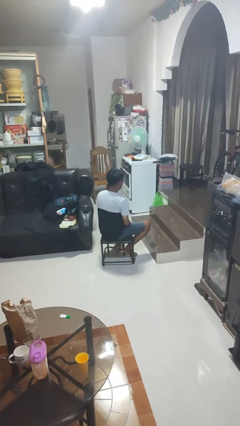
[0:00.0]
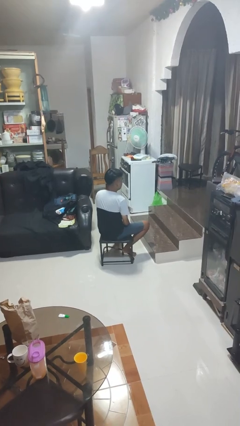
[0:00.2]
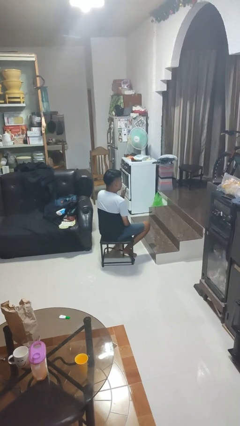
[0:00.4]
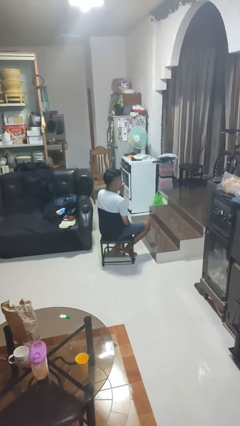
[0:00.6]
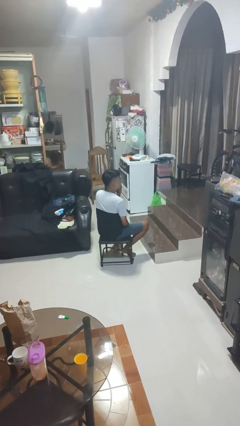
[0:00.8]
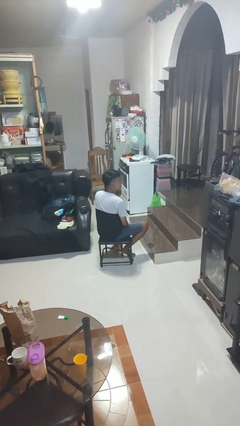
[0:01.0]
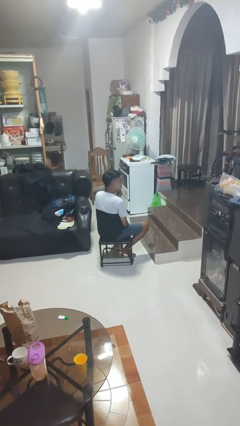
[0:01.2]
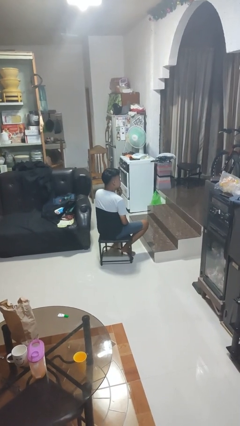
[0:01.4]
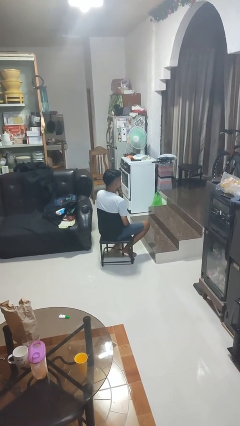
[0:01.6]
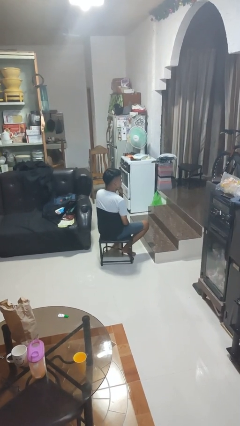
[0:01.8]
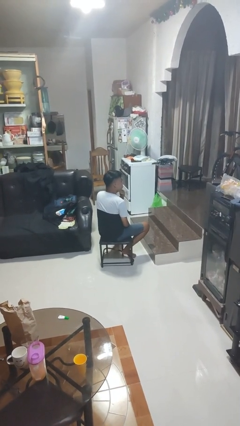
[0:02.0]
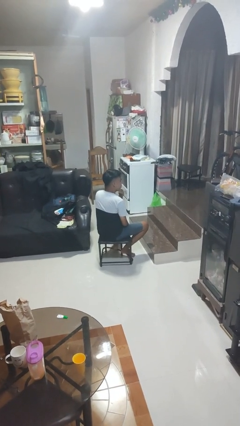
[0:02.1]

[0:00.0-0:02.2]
person strokes chin

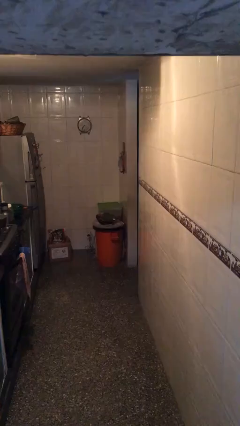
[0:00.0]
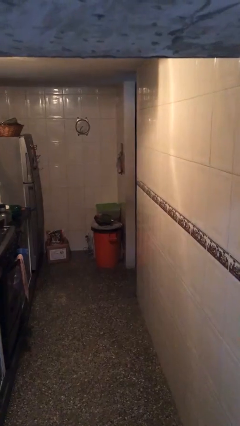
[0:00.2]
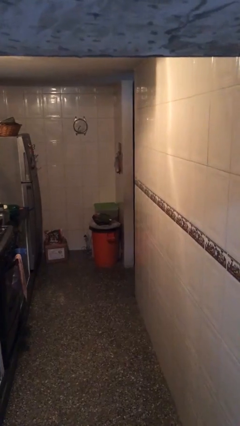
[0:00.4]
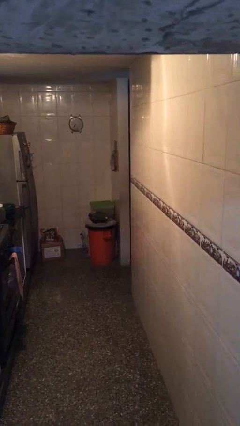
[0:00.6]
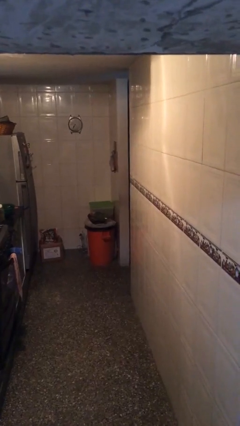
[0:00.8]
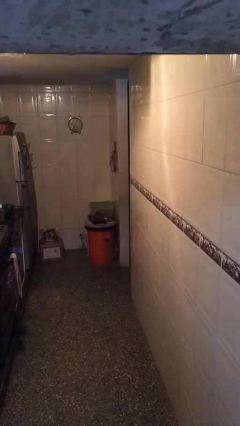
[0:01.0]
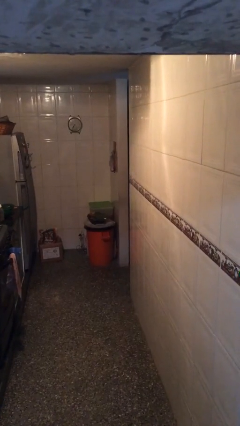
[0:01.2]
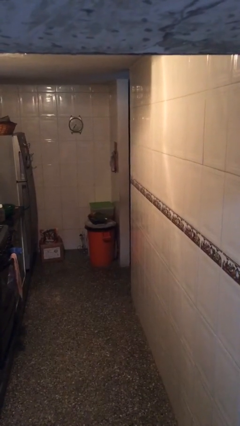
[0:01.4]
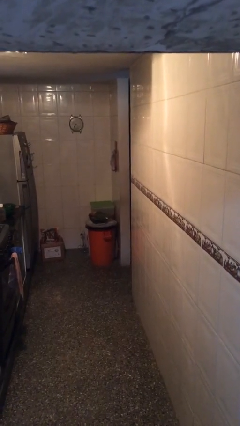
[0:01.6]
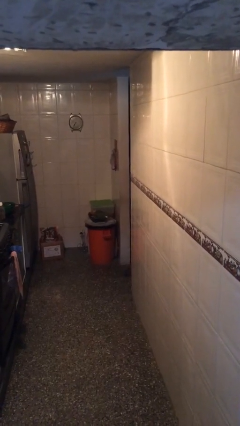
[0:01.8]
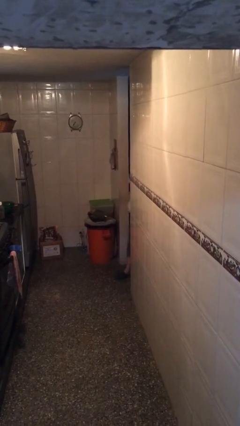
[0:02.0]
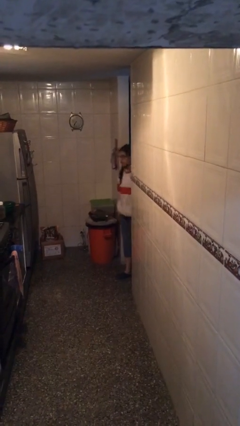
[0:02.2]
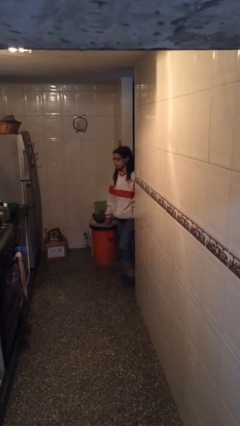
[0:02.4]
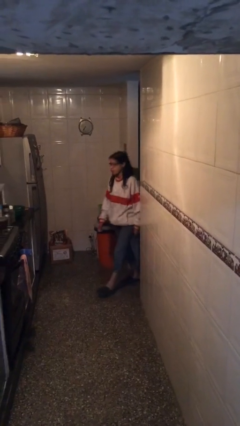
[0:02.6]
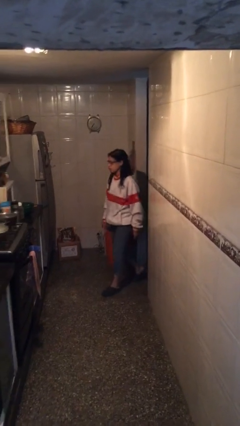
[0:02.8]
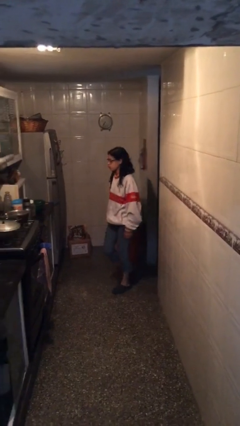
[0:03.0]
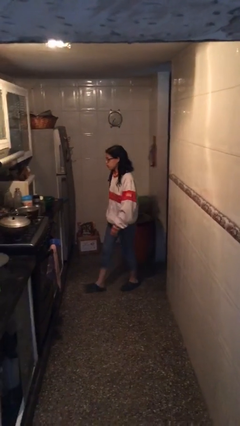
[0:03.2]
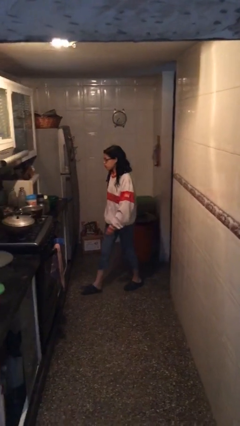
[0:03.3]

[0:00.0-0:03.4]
person enters scene through structure

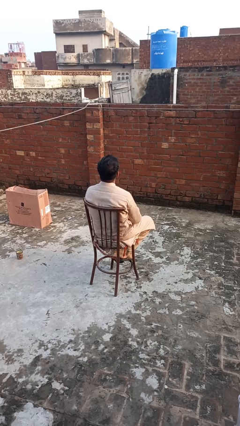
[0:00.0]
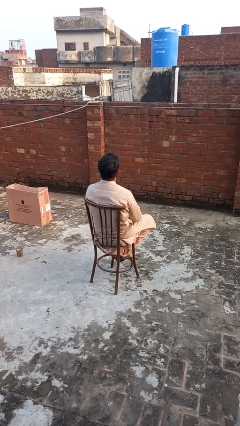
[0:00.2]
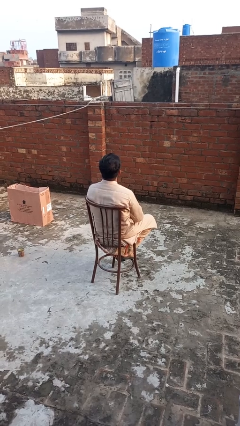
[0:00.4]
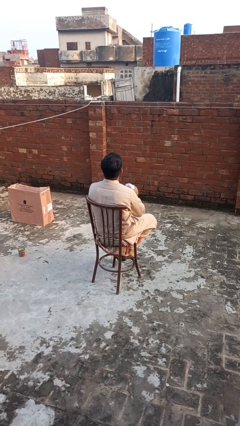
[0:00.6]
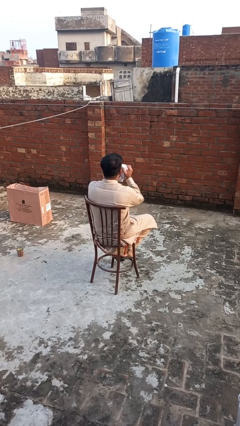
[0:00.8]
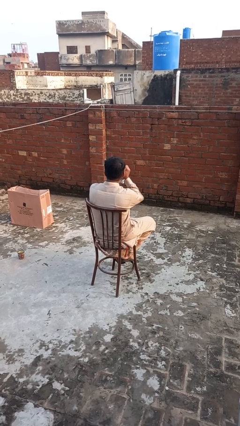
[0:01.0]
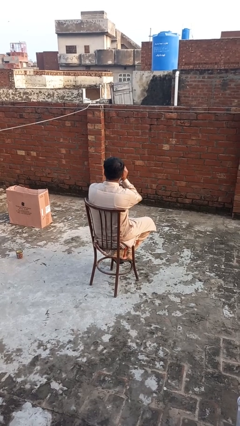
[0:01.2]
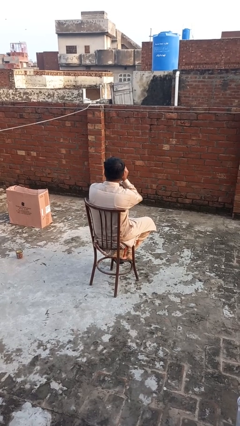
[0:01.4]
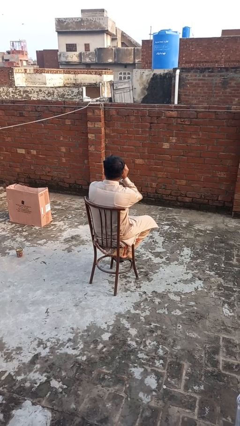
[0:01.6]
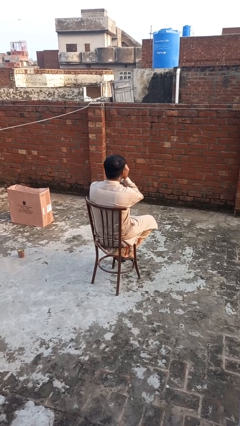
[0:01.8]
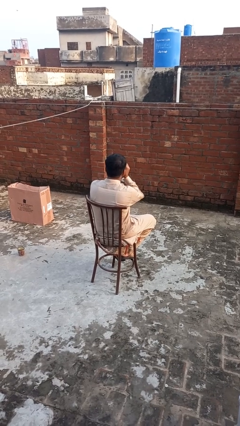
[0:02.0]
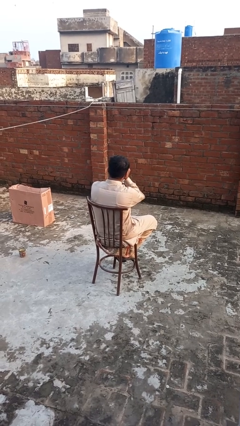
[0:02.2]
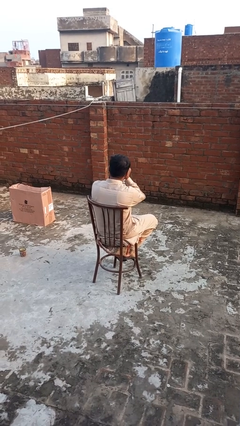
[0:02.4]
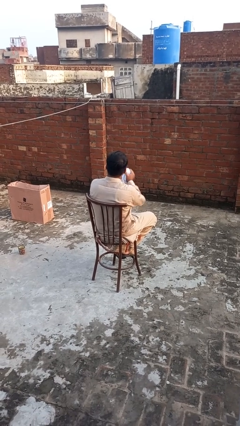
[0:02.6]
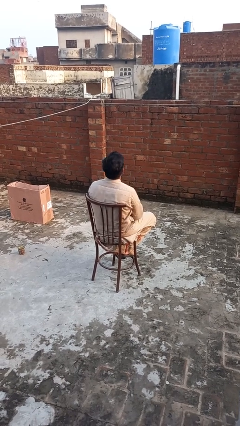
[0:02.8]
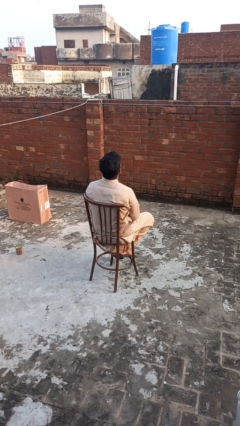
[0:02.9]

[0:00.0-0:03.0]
person blows nose

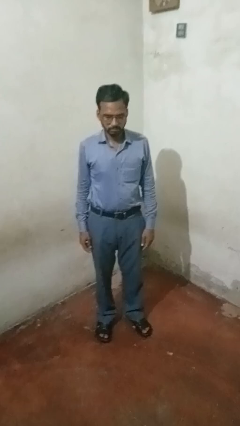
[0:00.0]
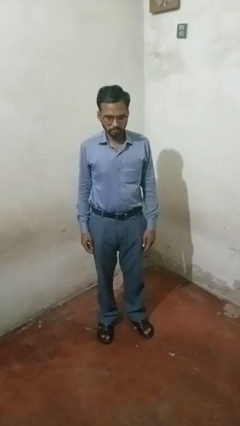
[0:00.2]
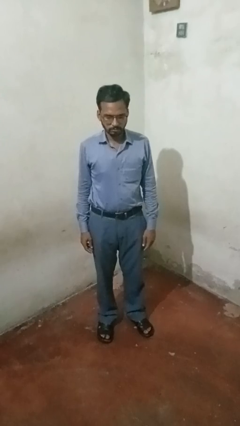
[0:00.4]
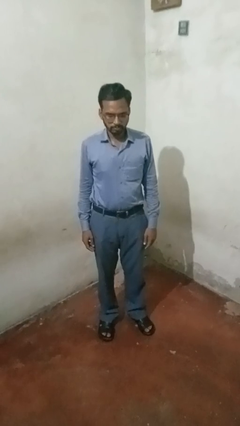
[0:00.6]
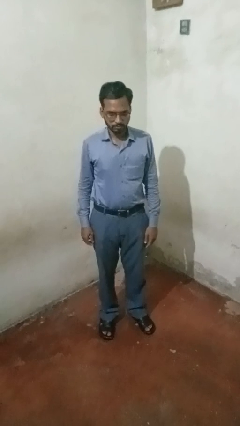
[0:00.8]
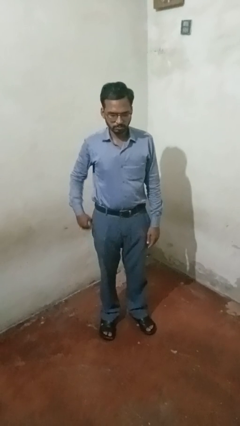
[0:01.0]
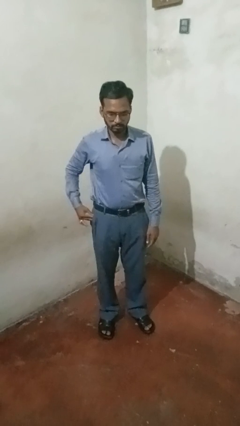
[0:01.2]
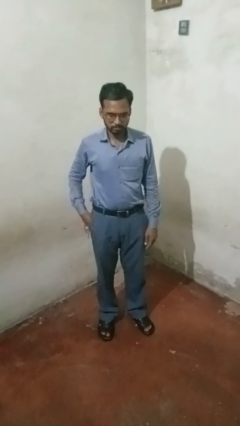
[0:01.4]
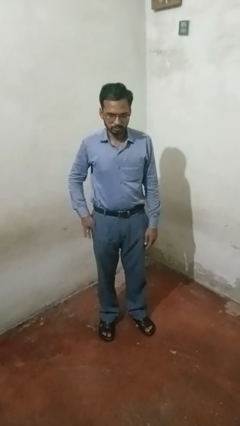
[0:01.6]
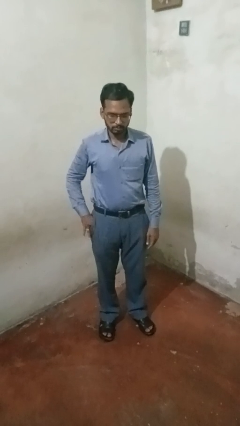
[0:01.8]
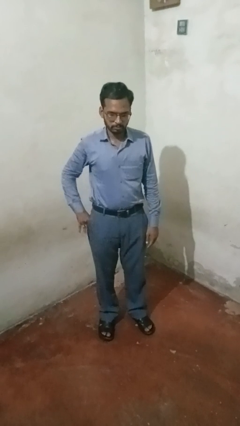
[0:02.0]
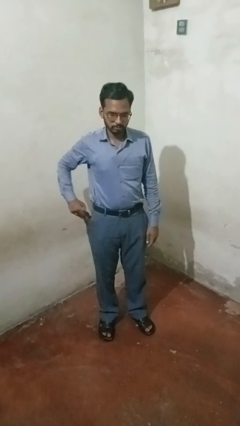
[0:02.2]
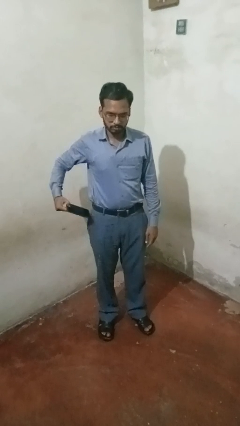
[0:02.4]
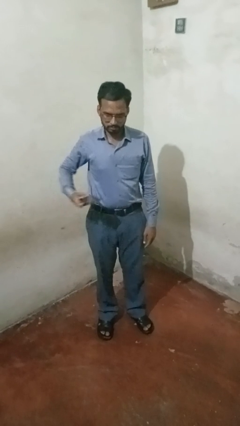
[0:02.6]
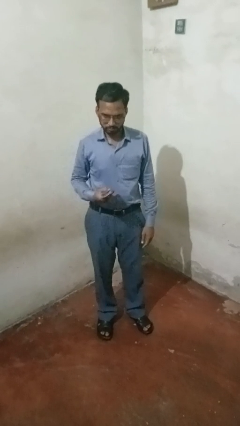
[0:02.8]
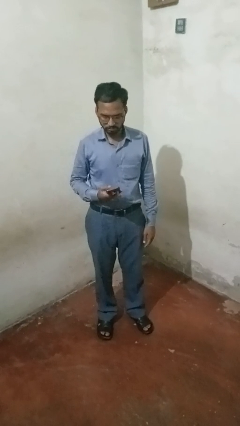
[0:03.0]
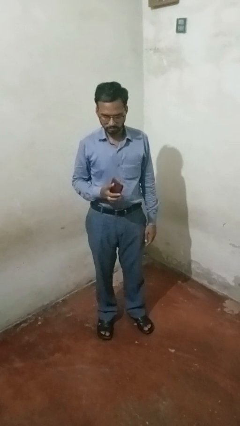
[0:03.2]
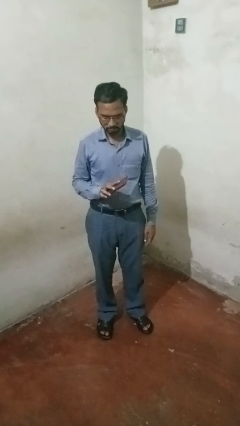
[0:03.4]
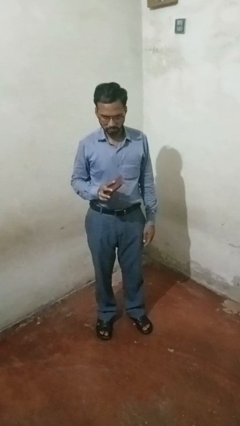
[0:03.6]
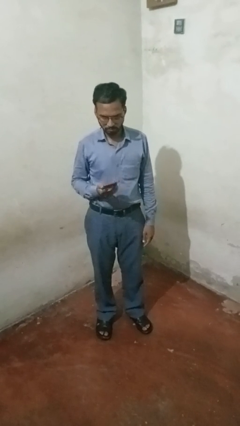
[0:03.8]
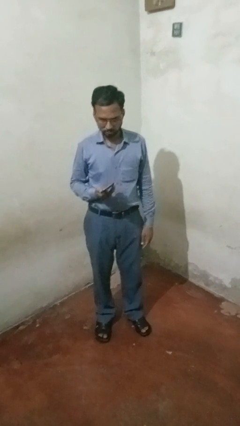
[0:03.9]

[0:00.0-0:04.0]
person takes phone from pocket

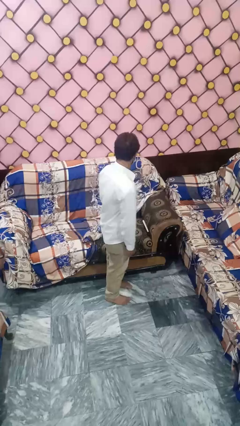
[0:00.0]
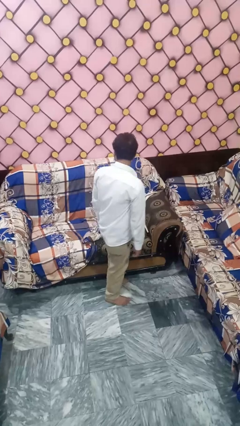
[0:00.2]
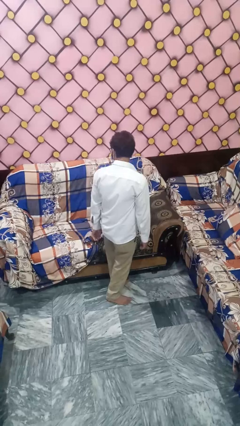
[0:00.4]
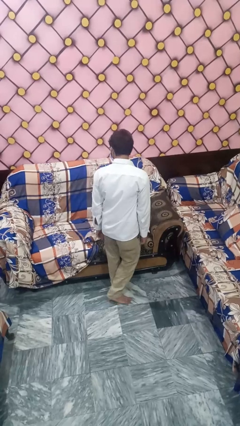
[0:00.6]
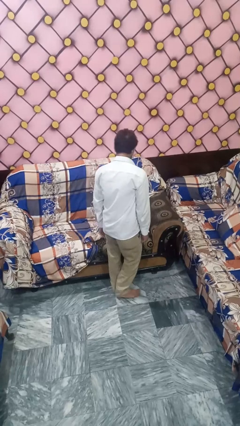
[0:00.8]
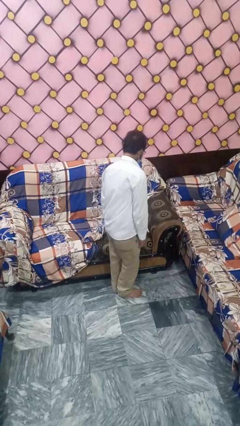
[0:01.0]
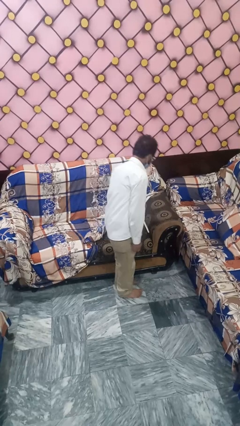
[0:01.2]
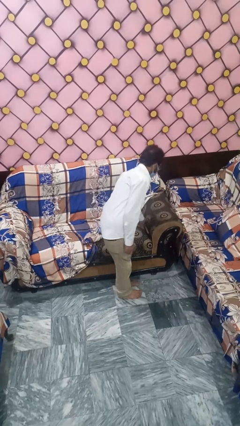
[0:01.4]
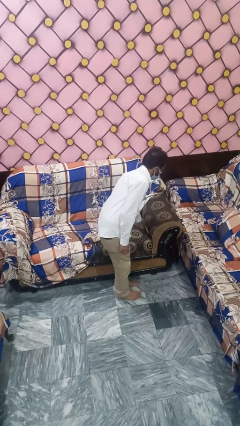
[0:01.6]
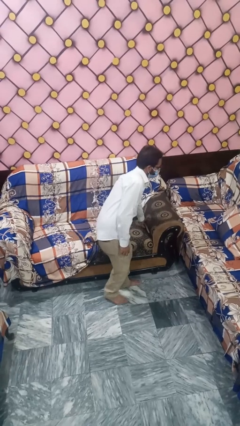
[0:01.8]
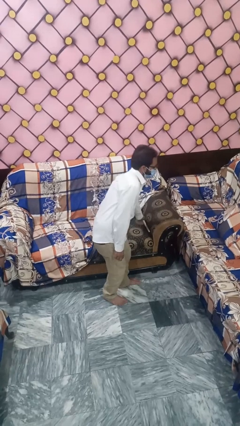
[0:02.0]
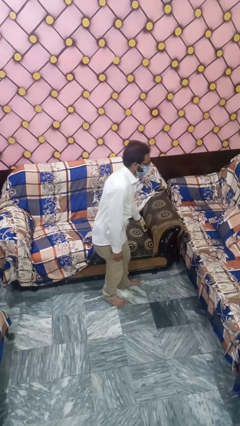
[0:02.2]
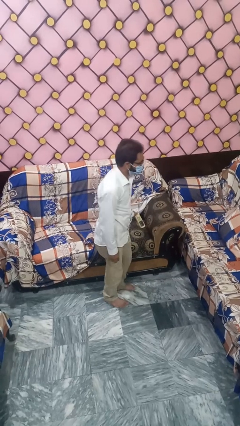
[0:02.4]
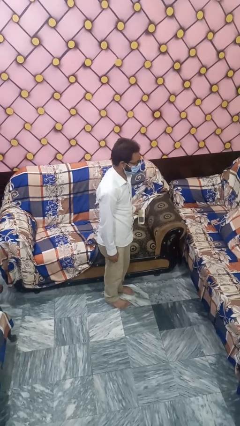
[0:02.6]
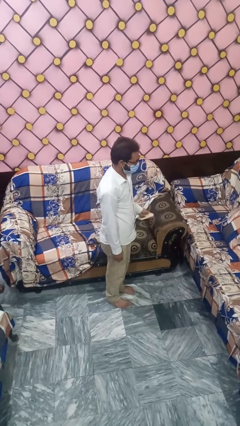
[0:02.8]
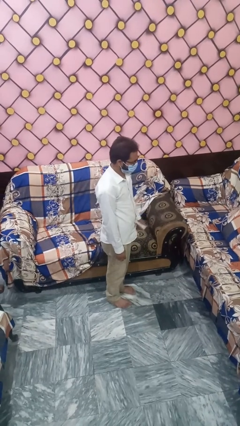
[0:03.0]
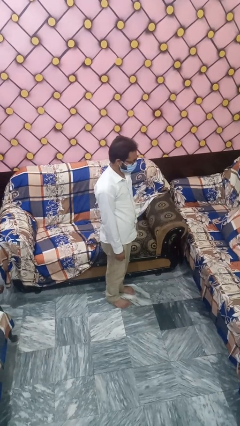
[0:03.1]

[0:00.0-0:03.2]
person searches under couch

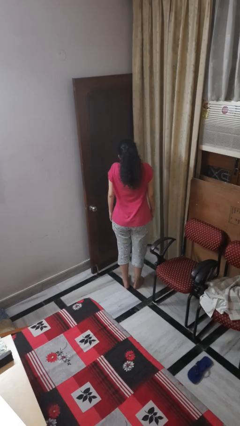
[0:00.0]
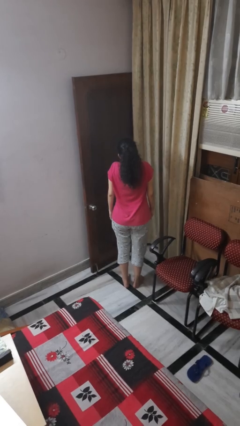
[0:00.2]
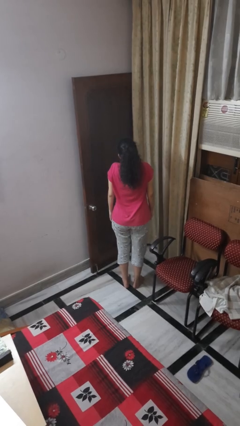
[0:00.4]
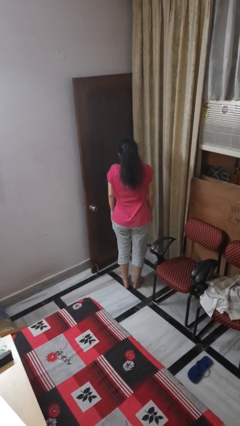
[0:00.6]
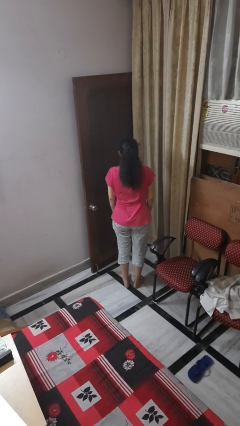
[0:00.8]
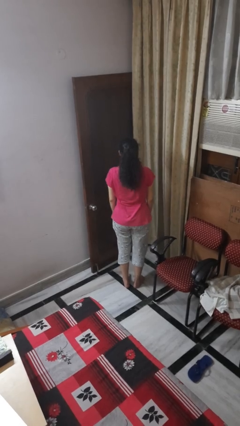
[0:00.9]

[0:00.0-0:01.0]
person shrugs

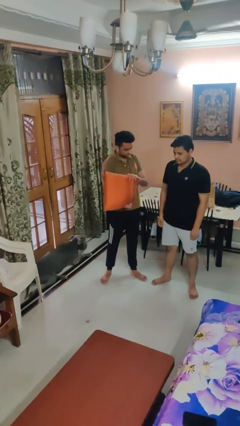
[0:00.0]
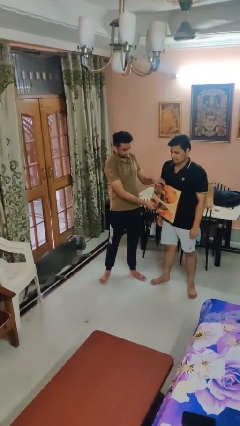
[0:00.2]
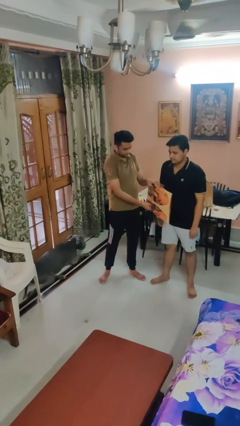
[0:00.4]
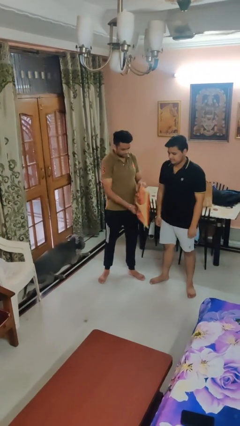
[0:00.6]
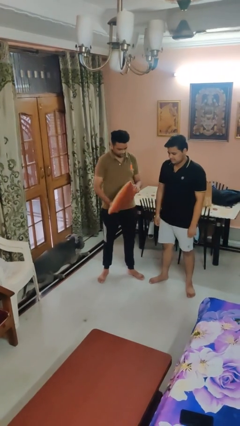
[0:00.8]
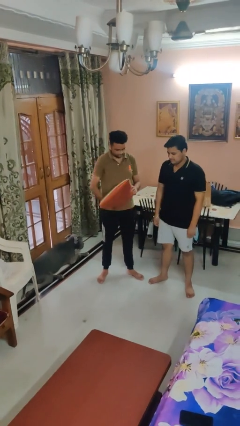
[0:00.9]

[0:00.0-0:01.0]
person hits person with pillow
